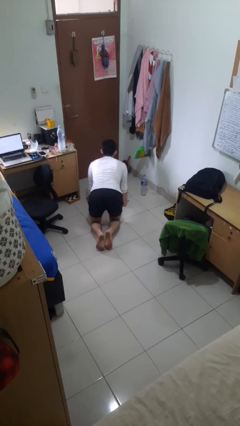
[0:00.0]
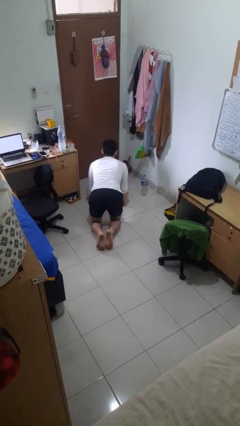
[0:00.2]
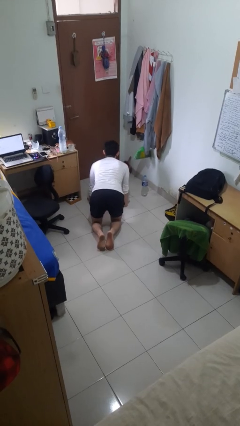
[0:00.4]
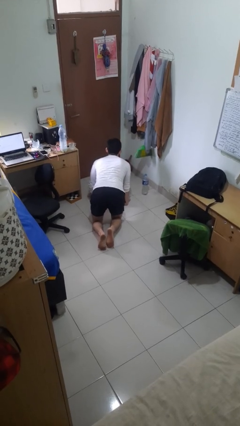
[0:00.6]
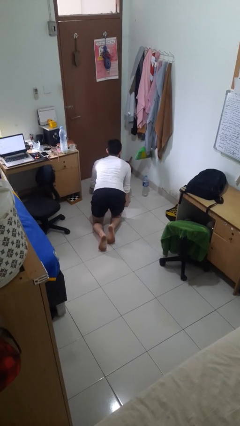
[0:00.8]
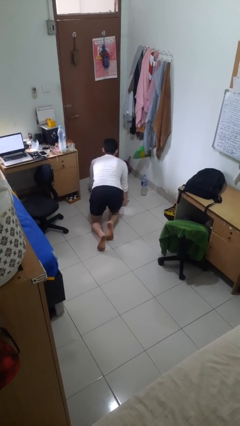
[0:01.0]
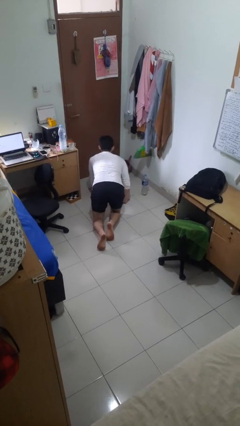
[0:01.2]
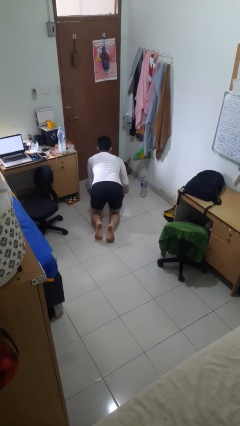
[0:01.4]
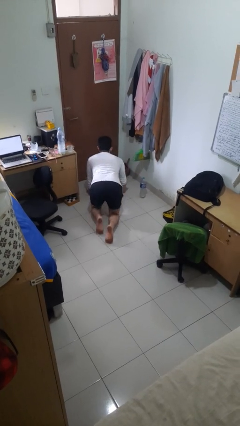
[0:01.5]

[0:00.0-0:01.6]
person crawls

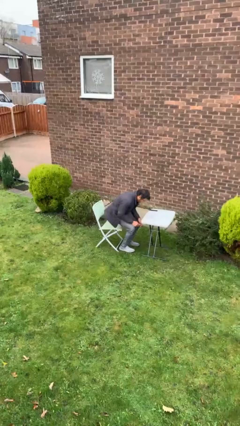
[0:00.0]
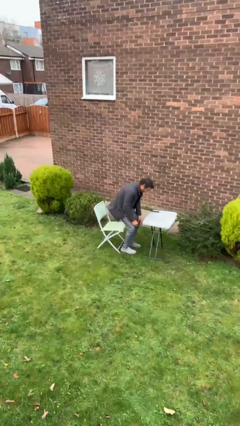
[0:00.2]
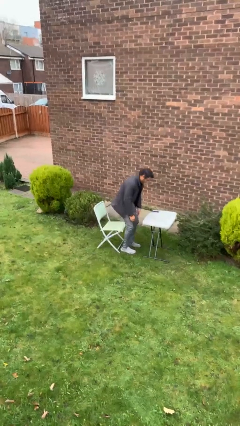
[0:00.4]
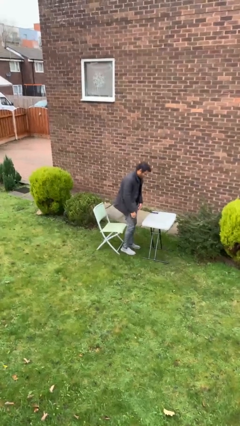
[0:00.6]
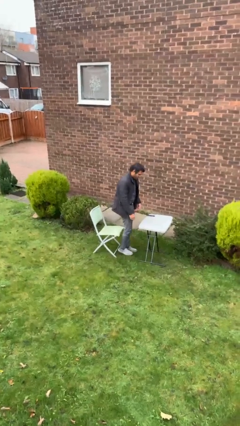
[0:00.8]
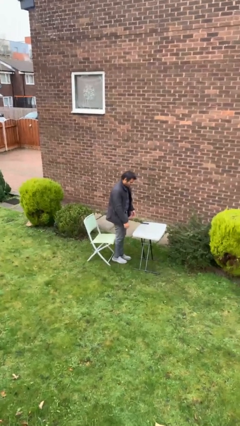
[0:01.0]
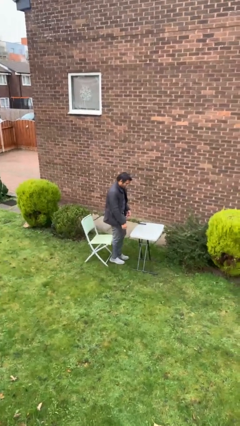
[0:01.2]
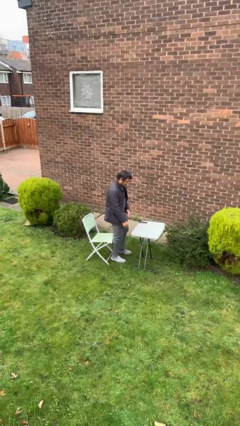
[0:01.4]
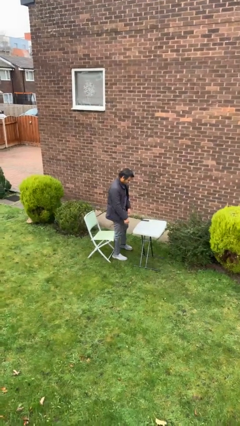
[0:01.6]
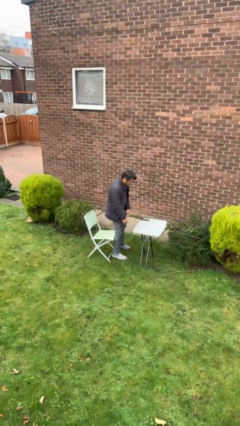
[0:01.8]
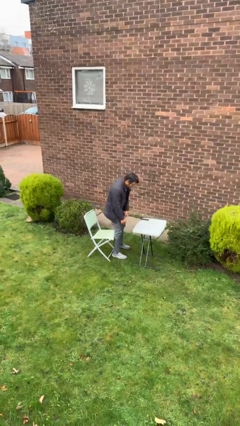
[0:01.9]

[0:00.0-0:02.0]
person stands up

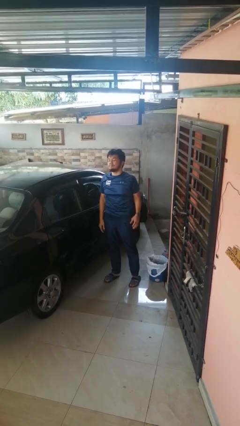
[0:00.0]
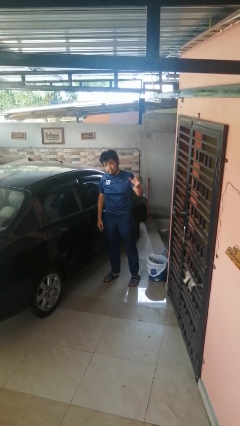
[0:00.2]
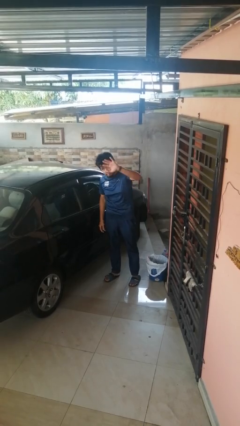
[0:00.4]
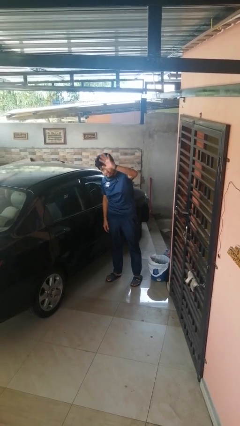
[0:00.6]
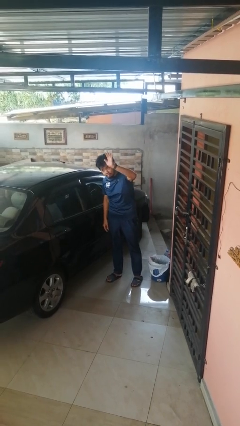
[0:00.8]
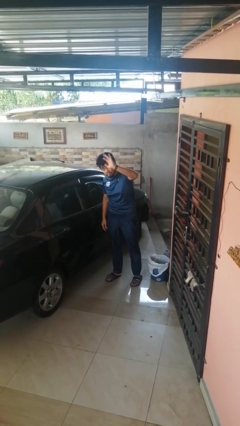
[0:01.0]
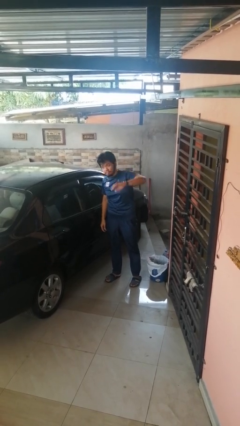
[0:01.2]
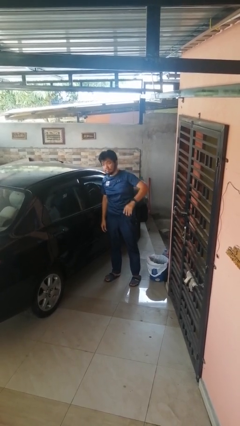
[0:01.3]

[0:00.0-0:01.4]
person waves at person

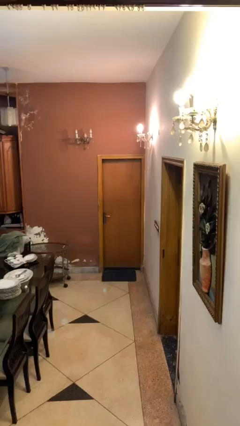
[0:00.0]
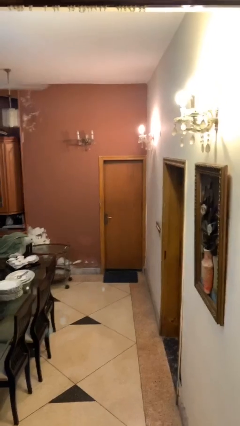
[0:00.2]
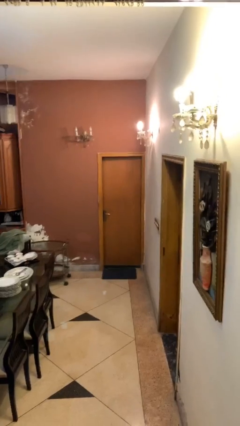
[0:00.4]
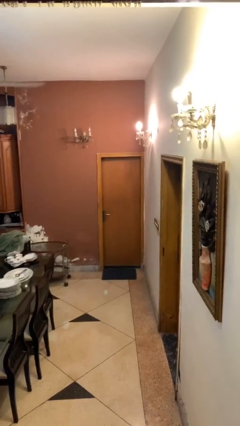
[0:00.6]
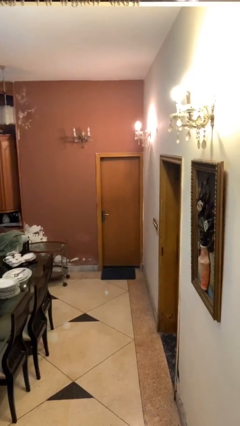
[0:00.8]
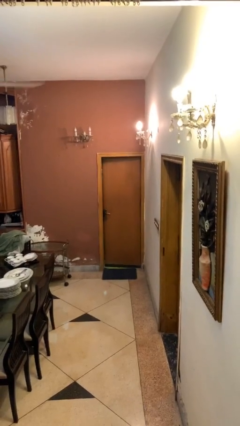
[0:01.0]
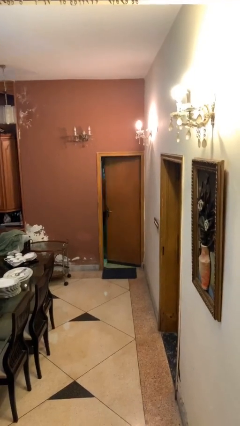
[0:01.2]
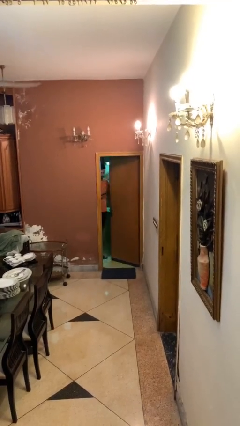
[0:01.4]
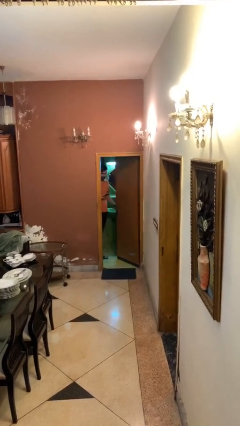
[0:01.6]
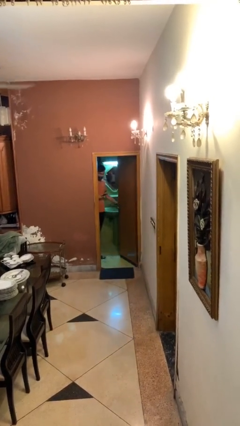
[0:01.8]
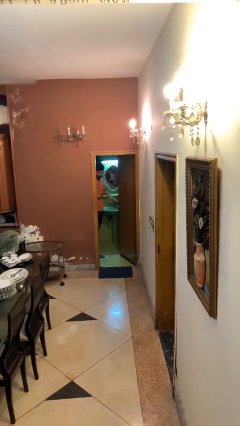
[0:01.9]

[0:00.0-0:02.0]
person opens facility door

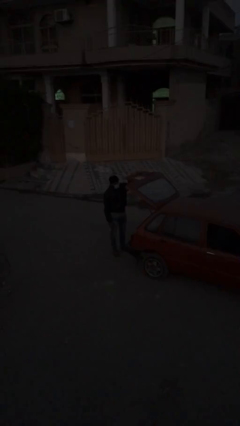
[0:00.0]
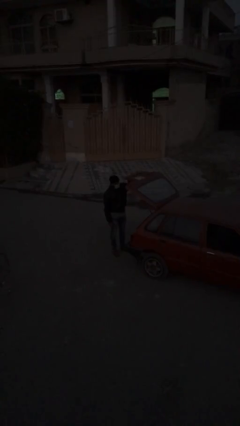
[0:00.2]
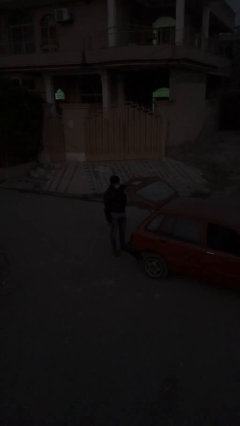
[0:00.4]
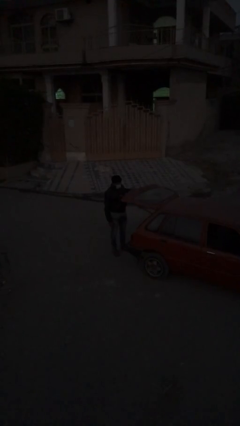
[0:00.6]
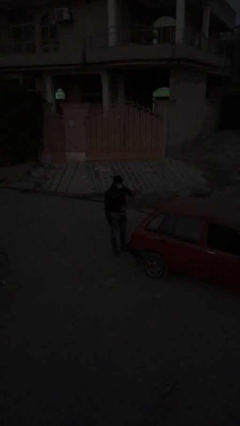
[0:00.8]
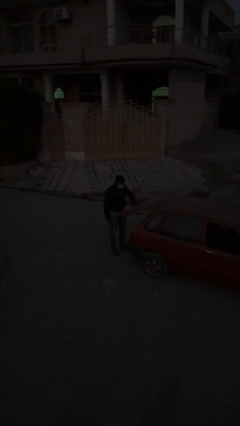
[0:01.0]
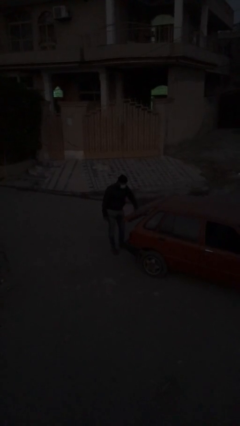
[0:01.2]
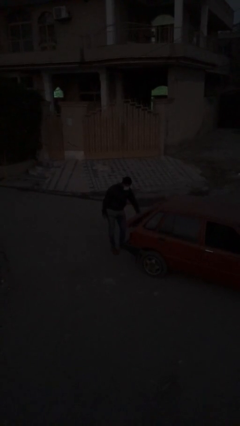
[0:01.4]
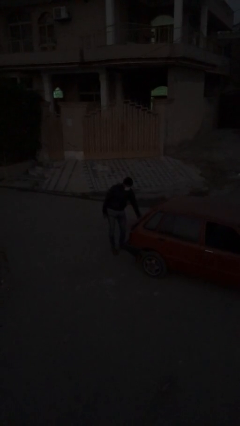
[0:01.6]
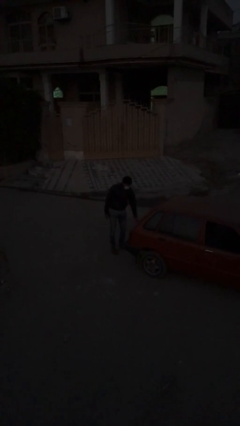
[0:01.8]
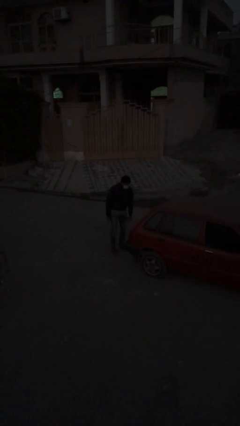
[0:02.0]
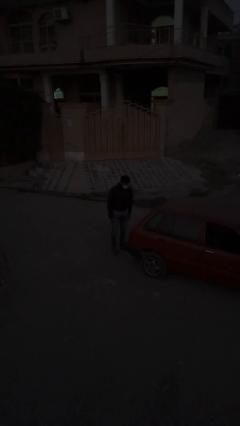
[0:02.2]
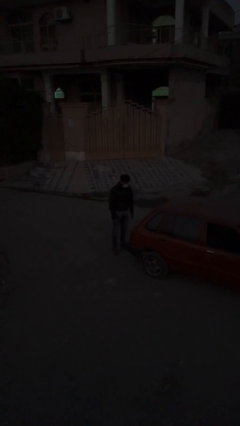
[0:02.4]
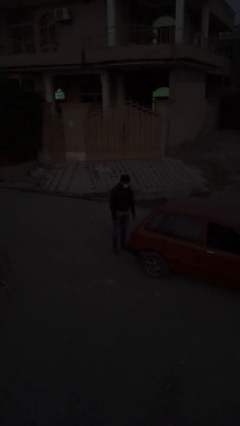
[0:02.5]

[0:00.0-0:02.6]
person closes car trunk

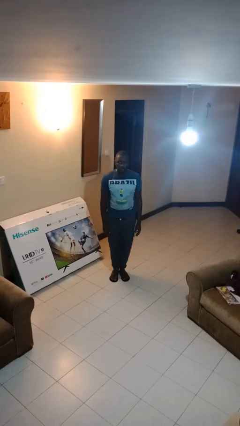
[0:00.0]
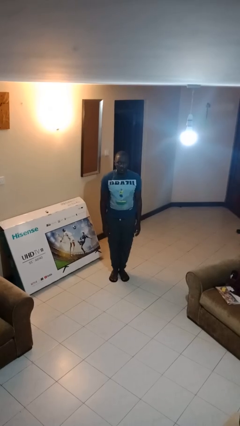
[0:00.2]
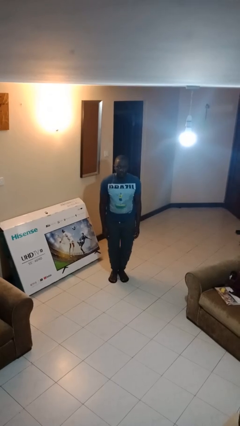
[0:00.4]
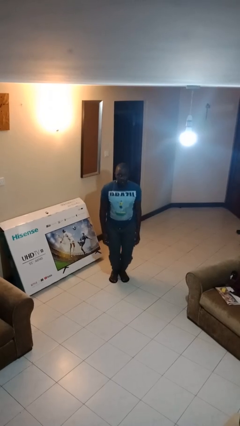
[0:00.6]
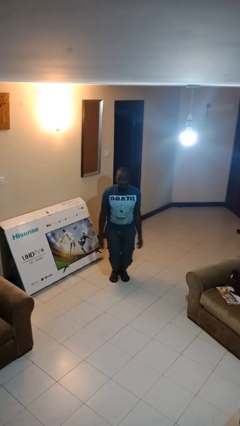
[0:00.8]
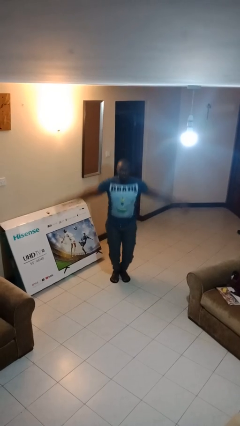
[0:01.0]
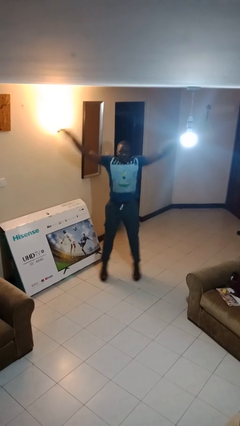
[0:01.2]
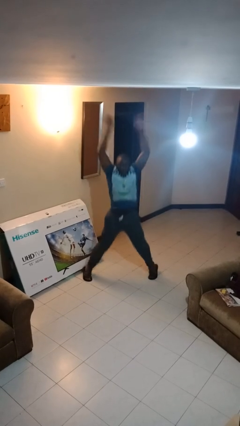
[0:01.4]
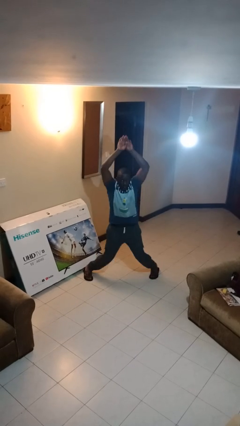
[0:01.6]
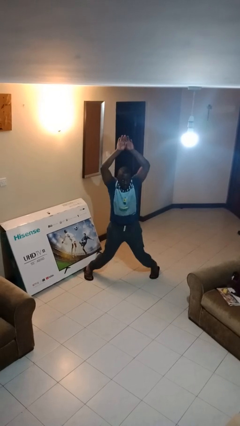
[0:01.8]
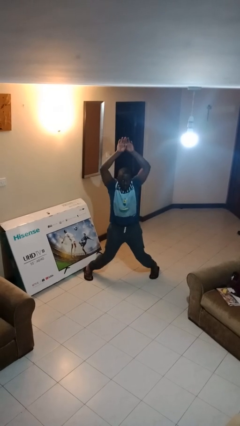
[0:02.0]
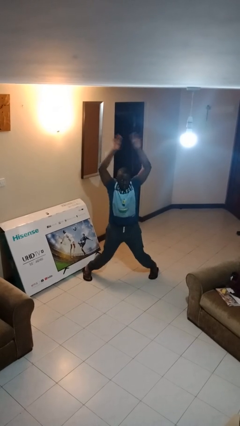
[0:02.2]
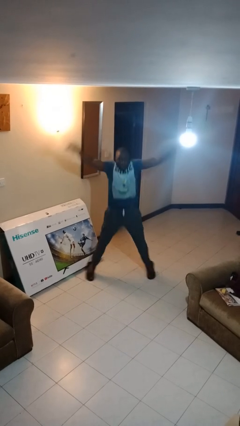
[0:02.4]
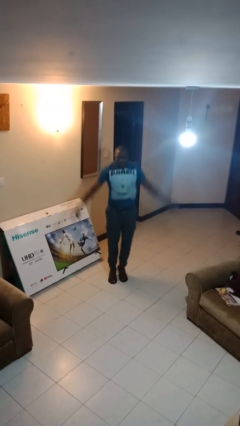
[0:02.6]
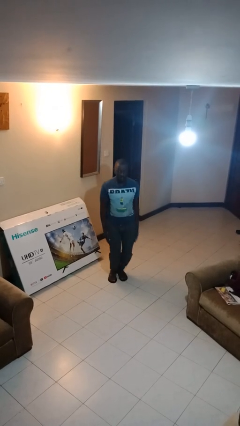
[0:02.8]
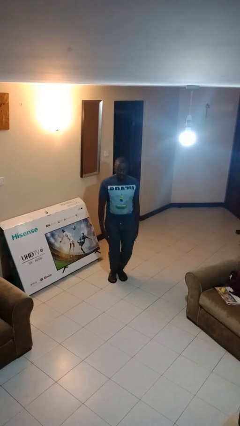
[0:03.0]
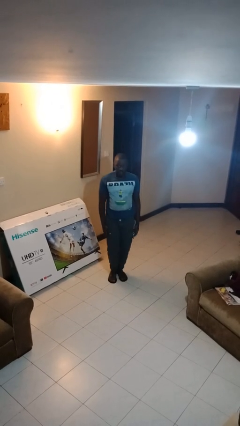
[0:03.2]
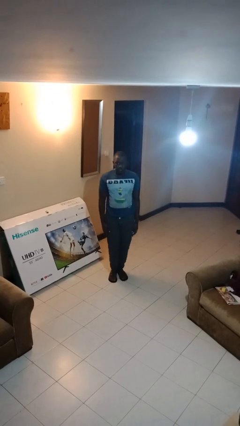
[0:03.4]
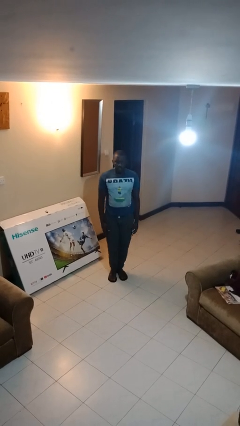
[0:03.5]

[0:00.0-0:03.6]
person exercises with jumping jacks

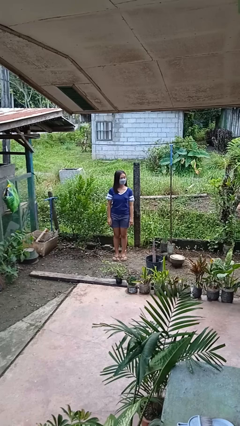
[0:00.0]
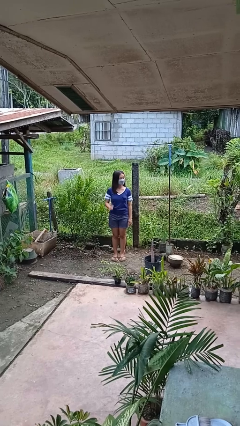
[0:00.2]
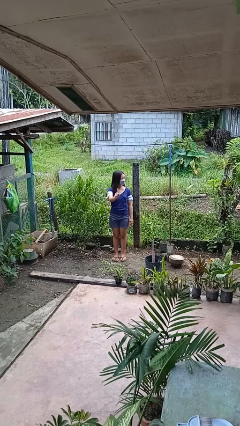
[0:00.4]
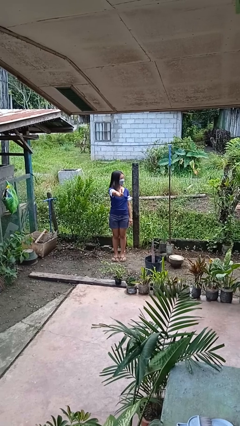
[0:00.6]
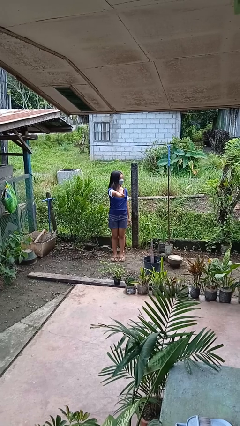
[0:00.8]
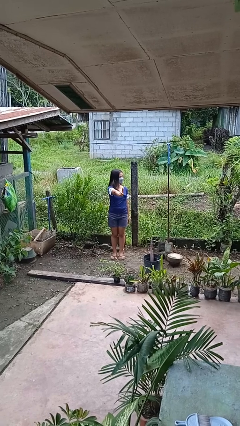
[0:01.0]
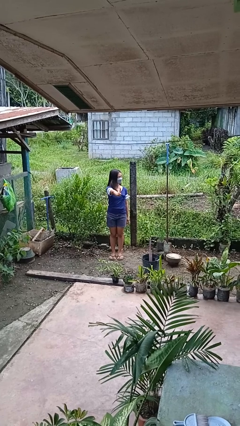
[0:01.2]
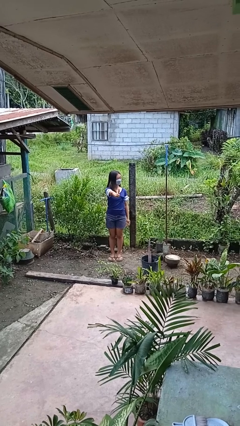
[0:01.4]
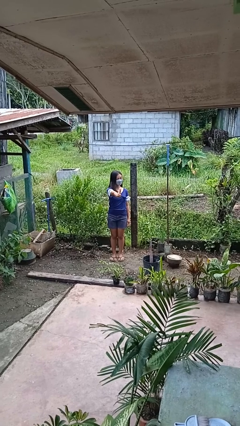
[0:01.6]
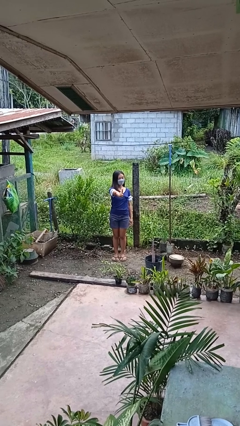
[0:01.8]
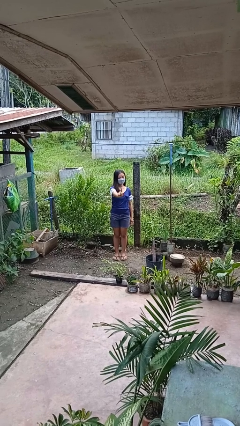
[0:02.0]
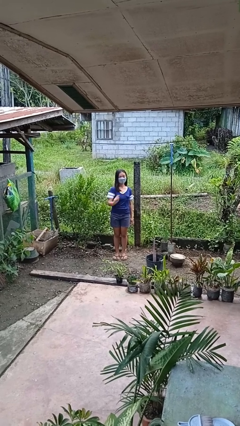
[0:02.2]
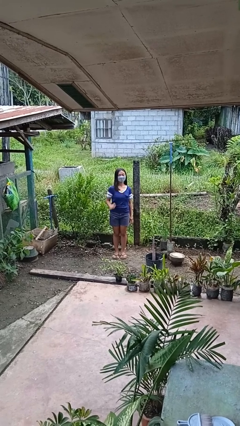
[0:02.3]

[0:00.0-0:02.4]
person gestures number one

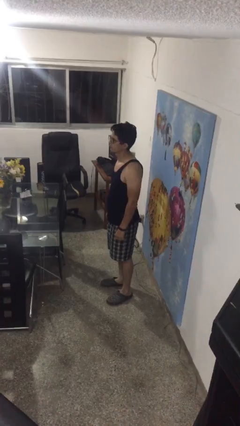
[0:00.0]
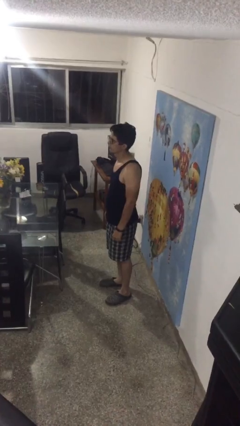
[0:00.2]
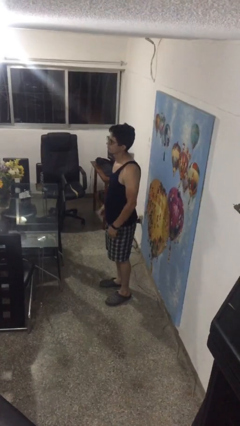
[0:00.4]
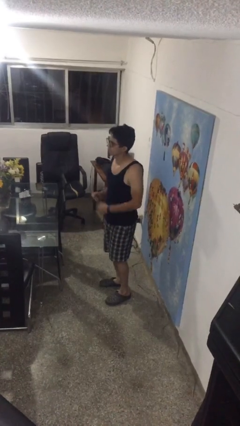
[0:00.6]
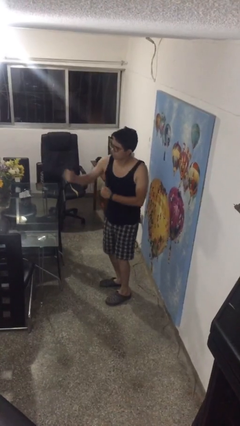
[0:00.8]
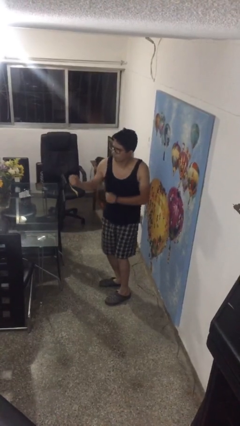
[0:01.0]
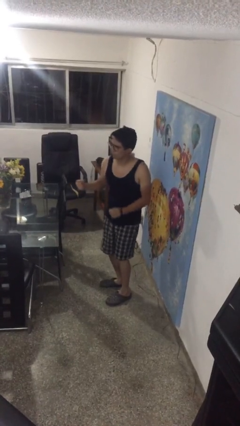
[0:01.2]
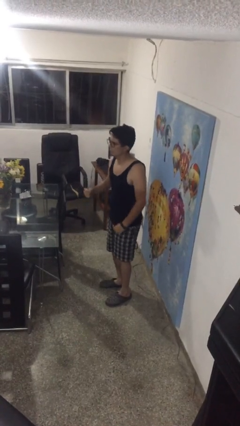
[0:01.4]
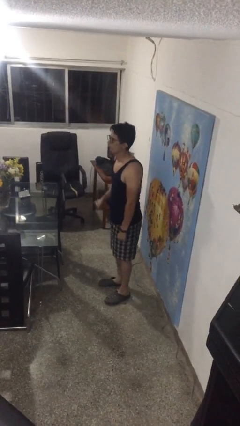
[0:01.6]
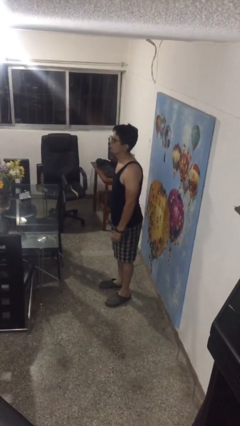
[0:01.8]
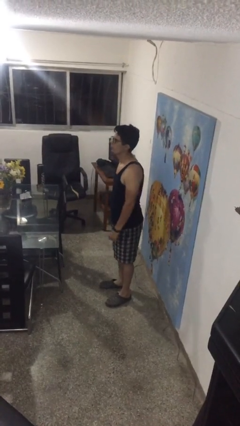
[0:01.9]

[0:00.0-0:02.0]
person punches
